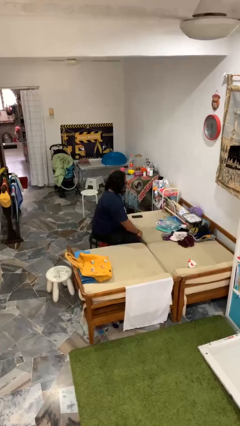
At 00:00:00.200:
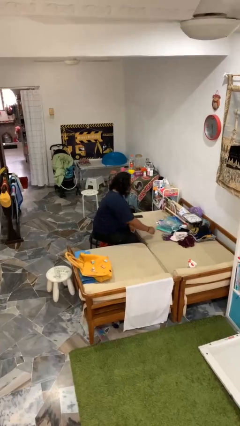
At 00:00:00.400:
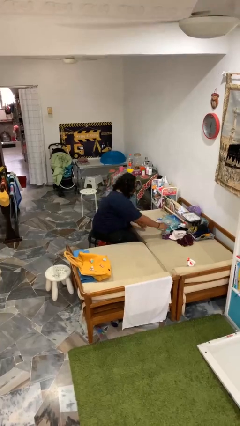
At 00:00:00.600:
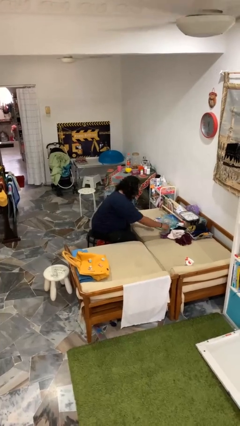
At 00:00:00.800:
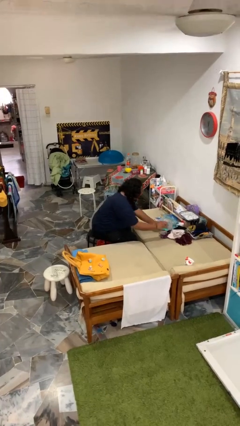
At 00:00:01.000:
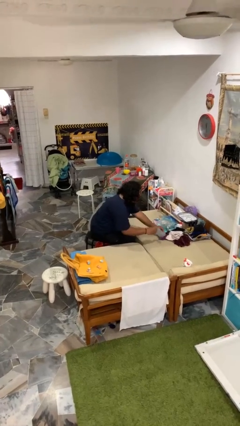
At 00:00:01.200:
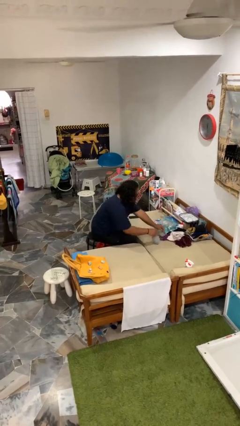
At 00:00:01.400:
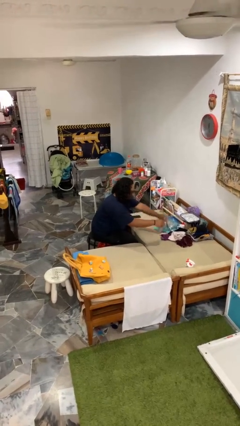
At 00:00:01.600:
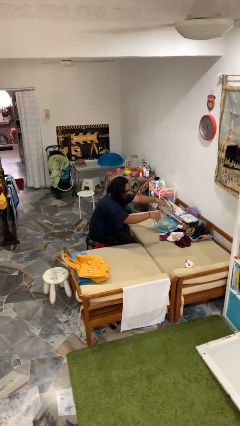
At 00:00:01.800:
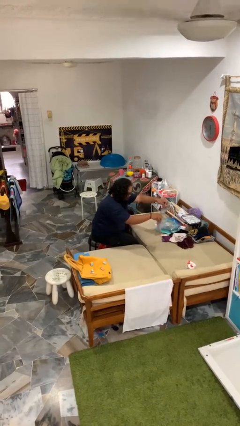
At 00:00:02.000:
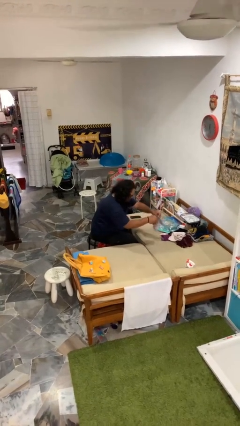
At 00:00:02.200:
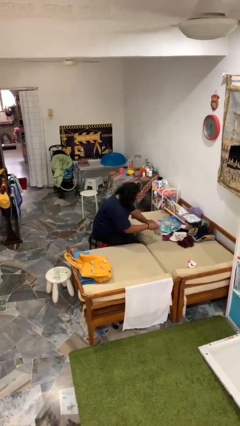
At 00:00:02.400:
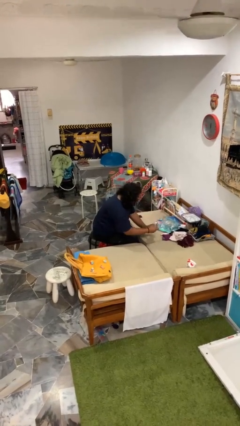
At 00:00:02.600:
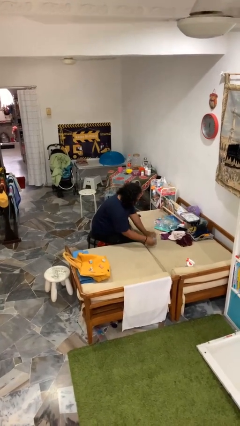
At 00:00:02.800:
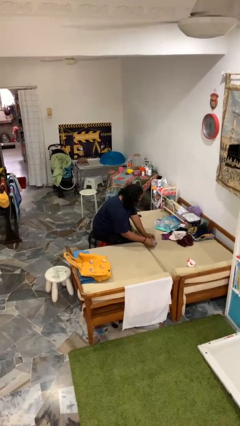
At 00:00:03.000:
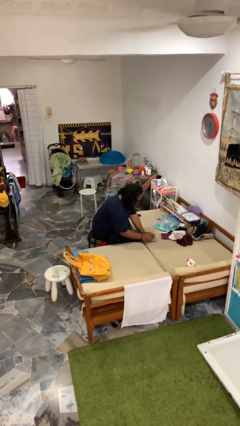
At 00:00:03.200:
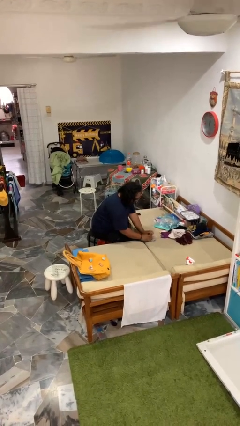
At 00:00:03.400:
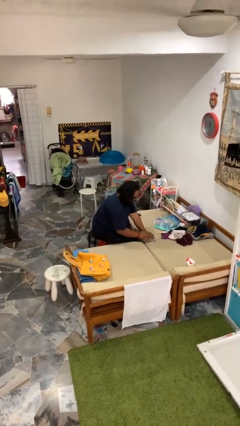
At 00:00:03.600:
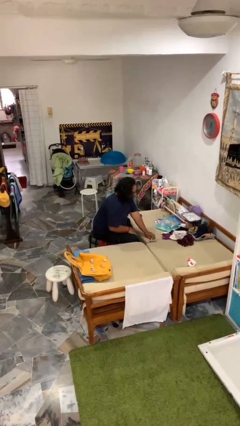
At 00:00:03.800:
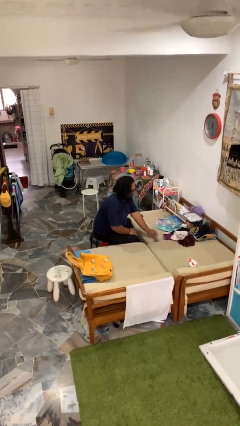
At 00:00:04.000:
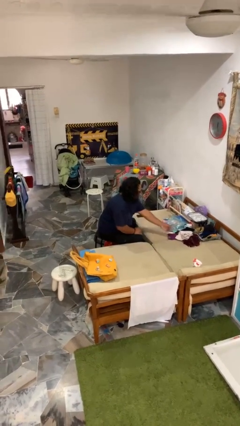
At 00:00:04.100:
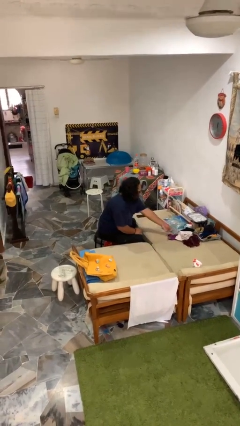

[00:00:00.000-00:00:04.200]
person folds socks

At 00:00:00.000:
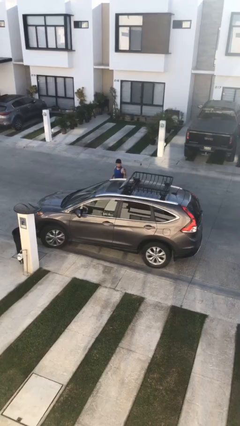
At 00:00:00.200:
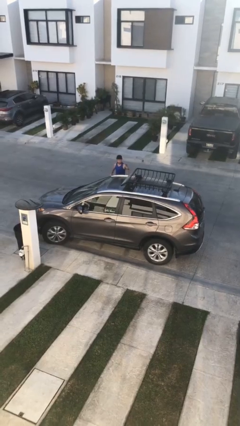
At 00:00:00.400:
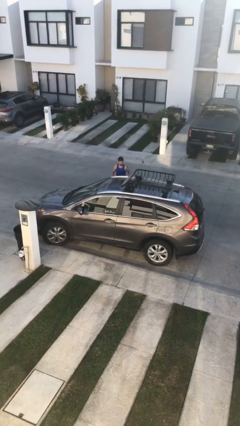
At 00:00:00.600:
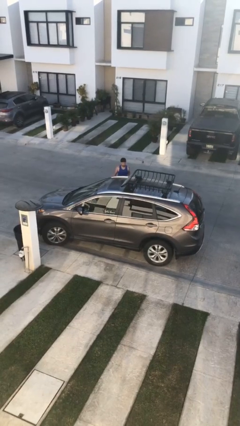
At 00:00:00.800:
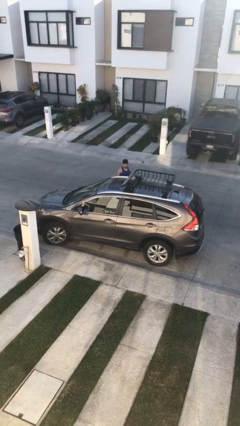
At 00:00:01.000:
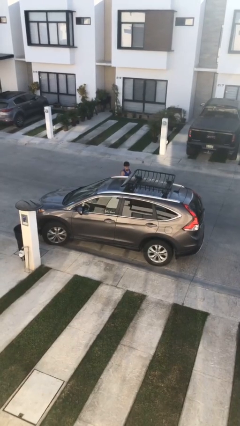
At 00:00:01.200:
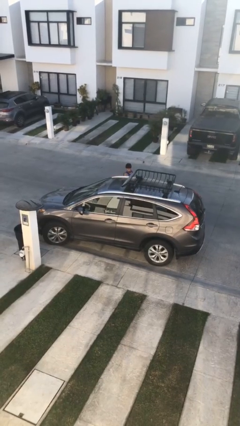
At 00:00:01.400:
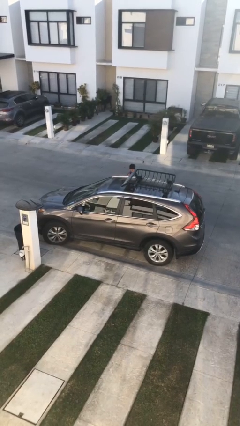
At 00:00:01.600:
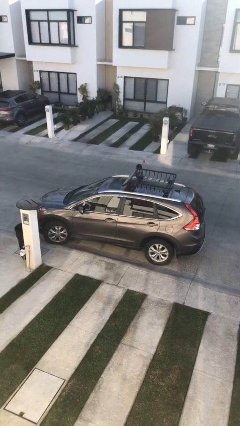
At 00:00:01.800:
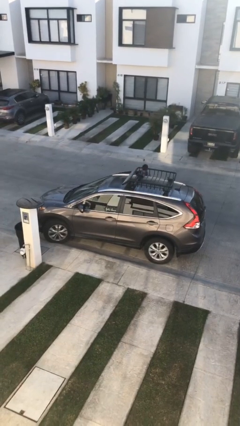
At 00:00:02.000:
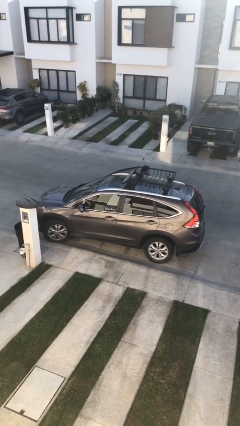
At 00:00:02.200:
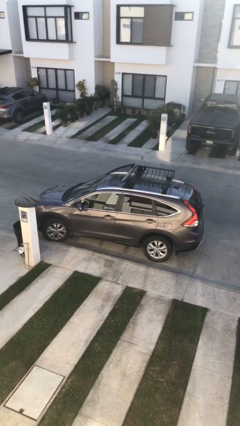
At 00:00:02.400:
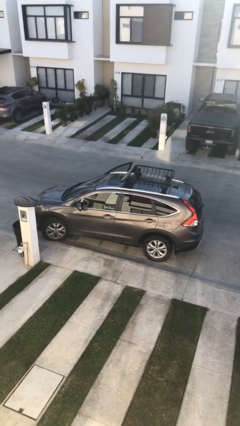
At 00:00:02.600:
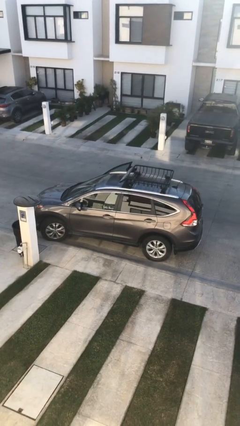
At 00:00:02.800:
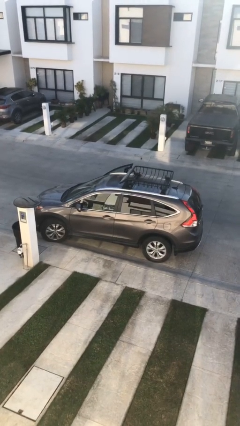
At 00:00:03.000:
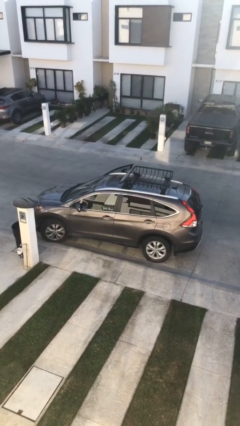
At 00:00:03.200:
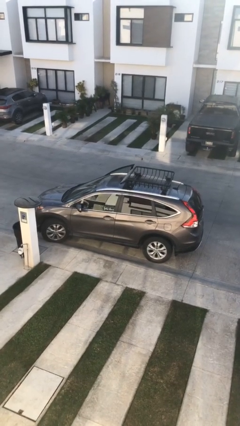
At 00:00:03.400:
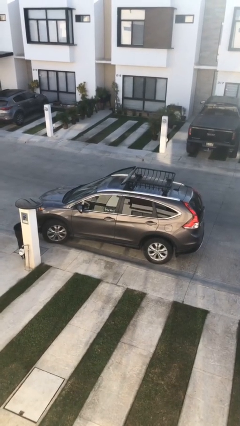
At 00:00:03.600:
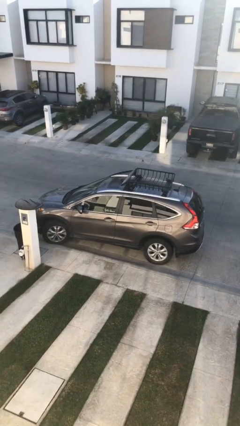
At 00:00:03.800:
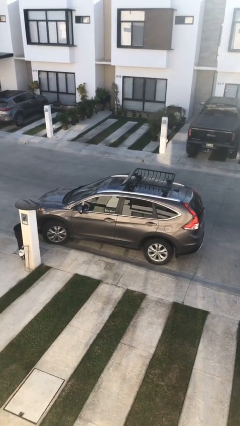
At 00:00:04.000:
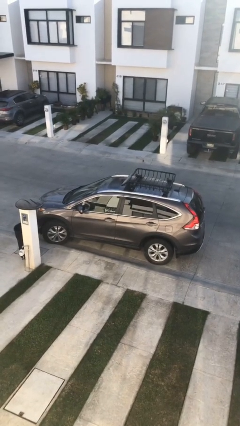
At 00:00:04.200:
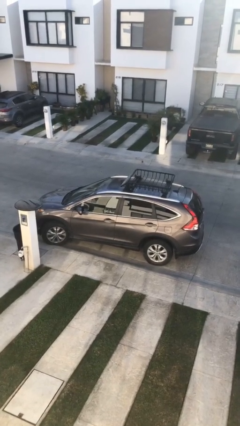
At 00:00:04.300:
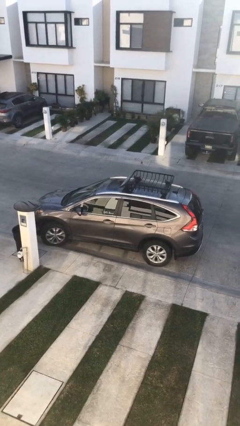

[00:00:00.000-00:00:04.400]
car picks up person

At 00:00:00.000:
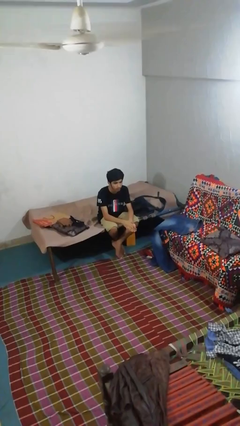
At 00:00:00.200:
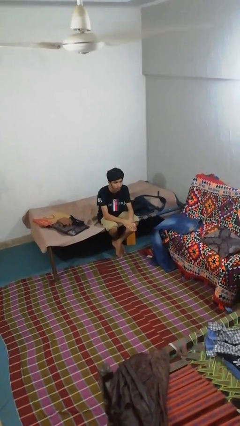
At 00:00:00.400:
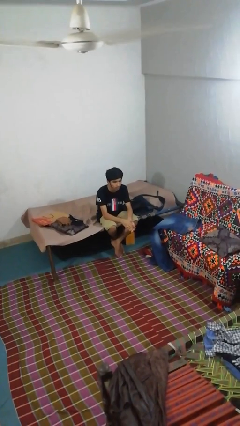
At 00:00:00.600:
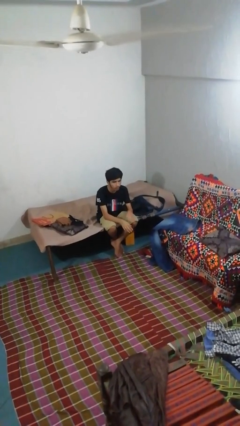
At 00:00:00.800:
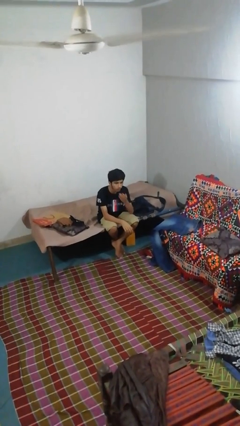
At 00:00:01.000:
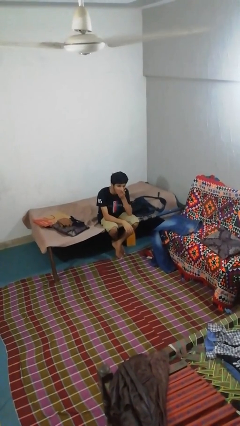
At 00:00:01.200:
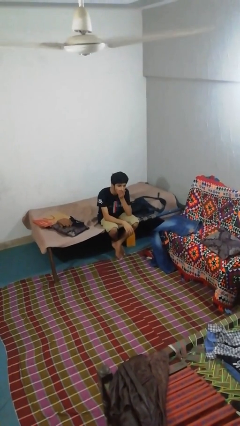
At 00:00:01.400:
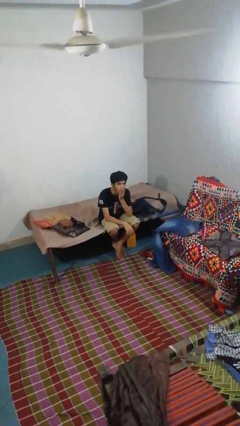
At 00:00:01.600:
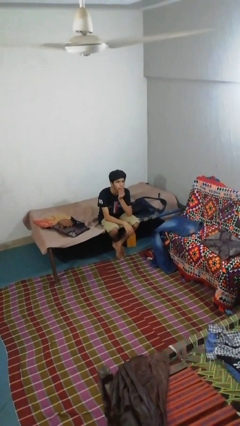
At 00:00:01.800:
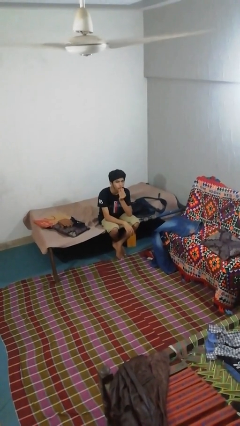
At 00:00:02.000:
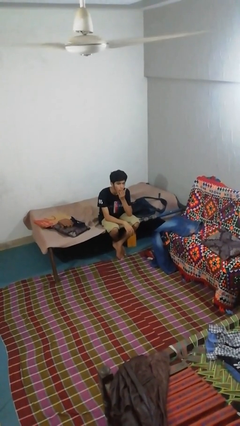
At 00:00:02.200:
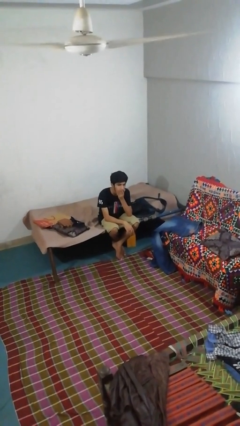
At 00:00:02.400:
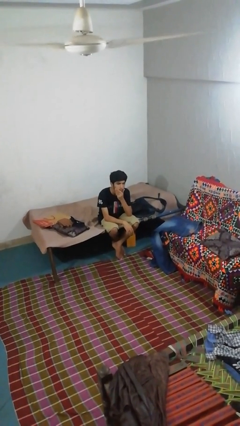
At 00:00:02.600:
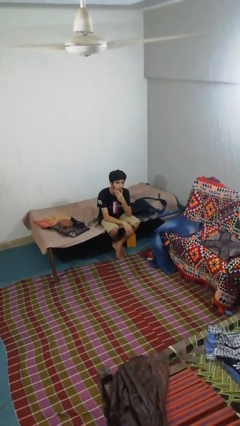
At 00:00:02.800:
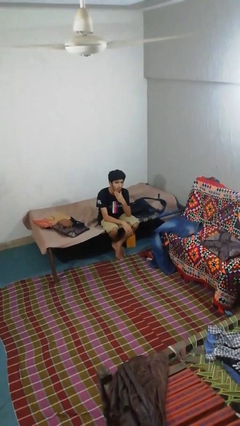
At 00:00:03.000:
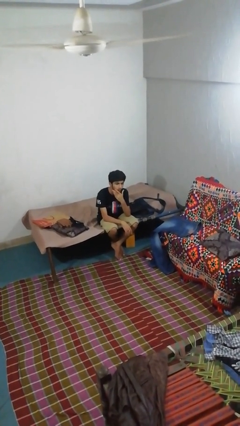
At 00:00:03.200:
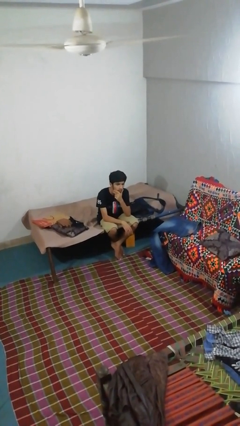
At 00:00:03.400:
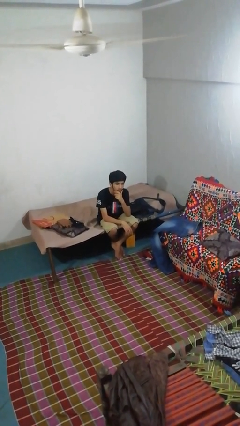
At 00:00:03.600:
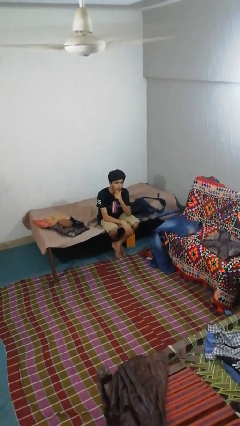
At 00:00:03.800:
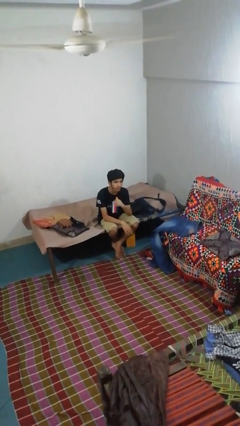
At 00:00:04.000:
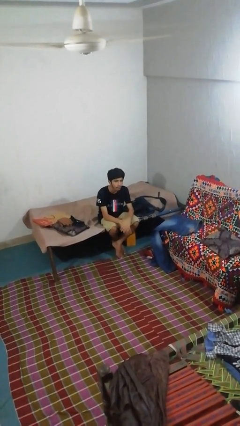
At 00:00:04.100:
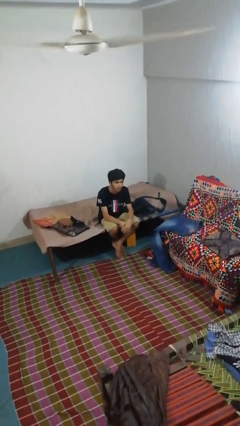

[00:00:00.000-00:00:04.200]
person strokes chin

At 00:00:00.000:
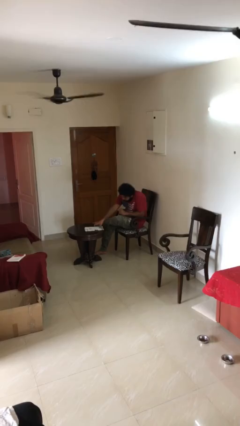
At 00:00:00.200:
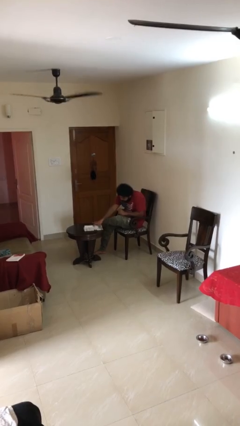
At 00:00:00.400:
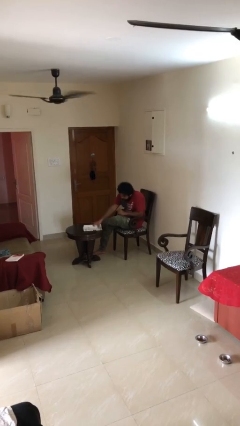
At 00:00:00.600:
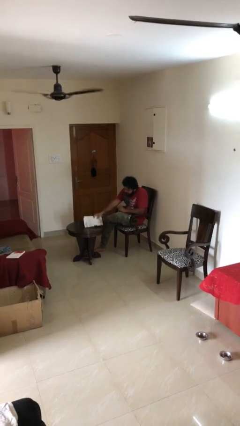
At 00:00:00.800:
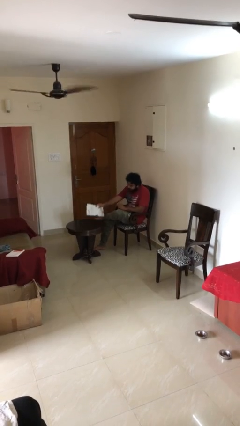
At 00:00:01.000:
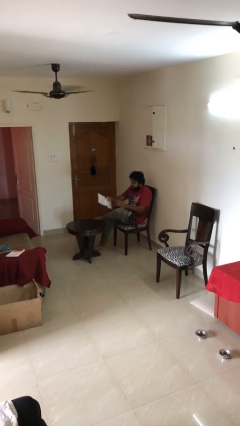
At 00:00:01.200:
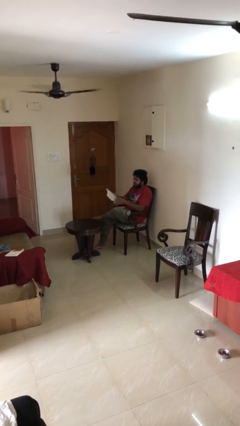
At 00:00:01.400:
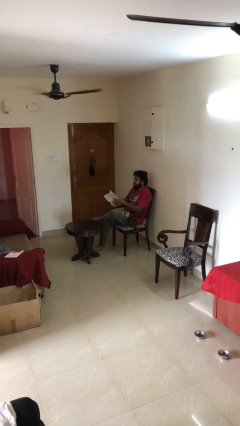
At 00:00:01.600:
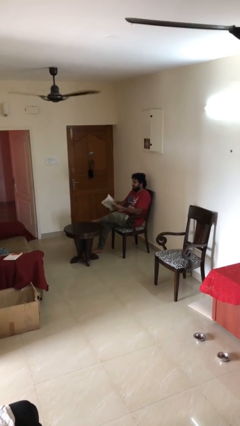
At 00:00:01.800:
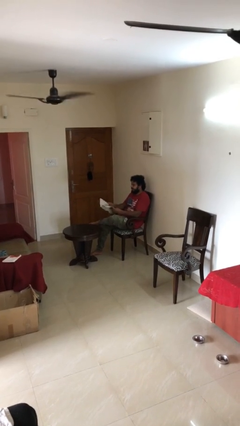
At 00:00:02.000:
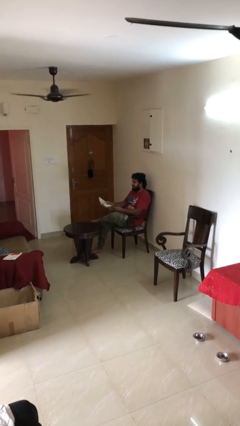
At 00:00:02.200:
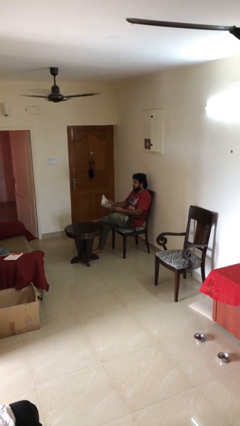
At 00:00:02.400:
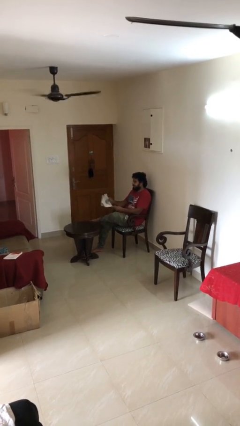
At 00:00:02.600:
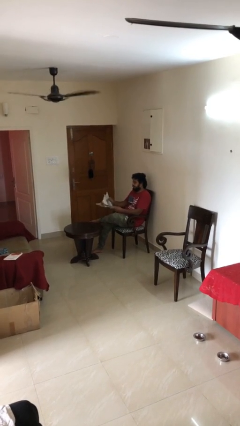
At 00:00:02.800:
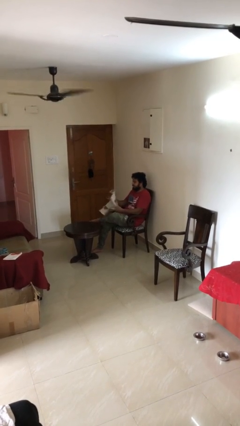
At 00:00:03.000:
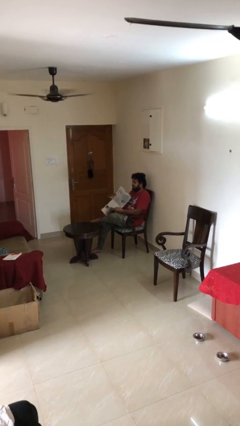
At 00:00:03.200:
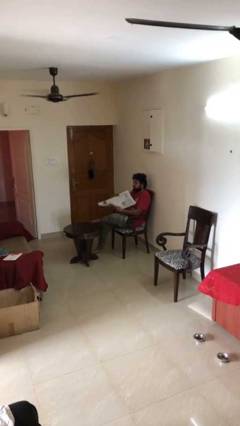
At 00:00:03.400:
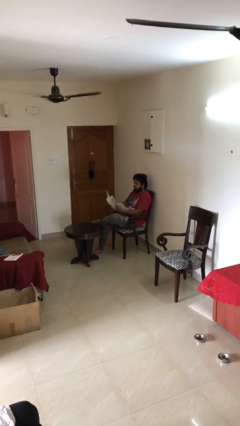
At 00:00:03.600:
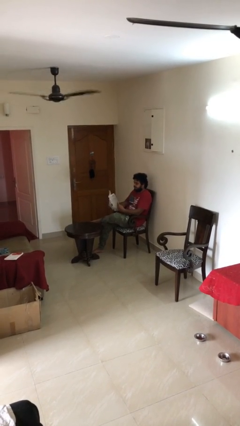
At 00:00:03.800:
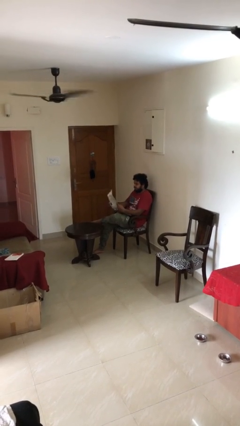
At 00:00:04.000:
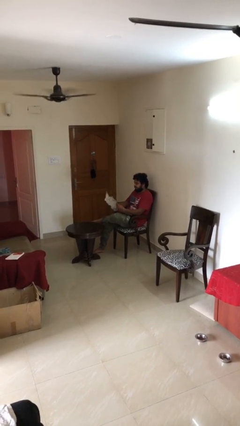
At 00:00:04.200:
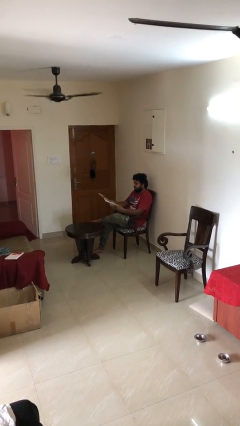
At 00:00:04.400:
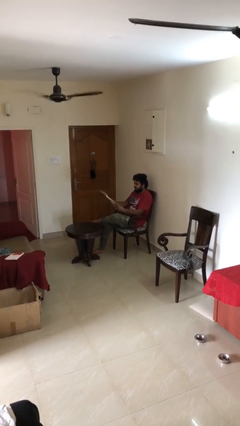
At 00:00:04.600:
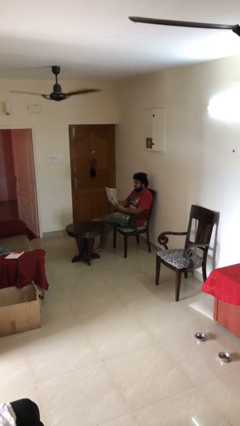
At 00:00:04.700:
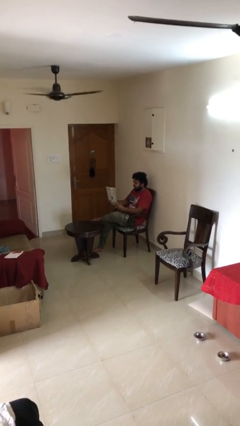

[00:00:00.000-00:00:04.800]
person picks up object from table

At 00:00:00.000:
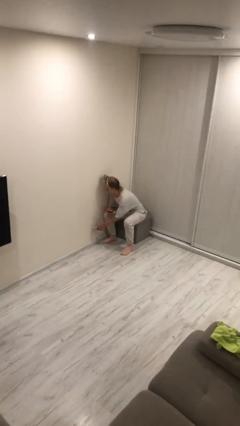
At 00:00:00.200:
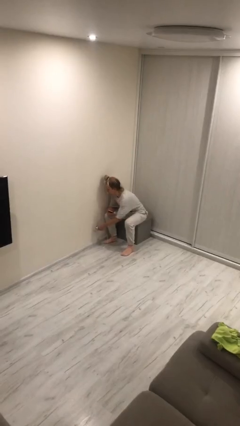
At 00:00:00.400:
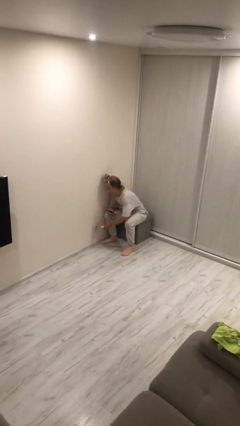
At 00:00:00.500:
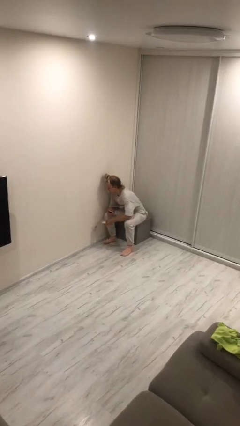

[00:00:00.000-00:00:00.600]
person unplugs from electrical socket
